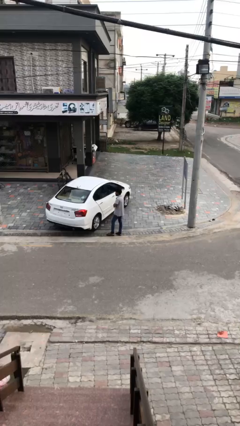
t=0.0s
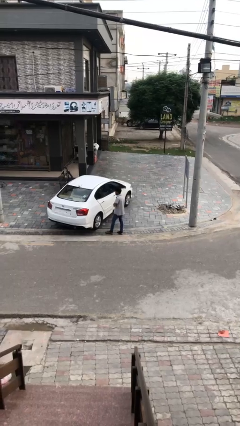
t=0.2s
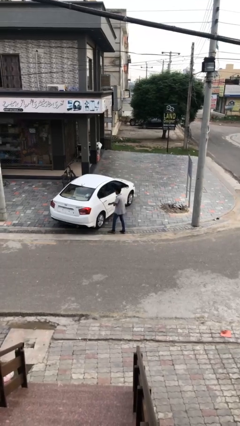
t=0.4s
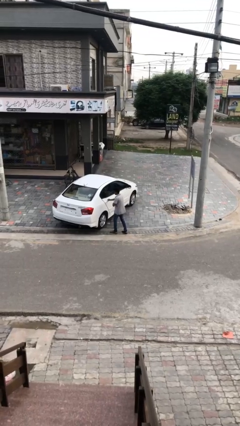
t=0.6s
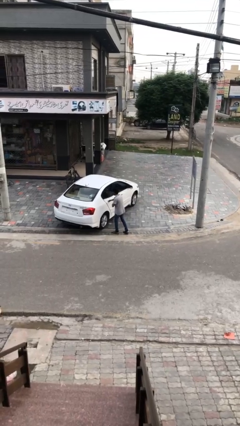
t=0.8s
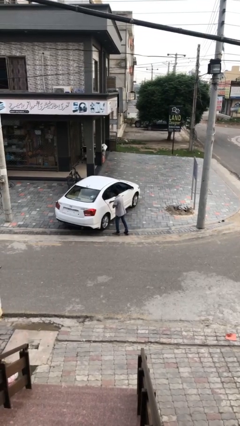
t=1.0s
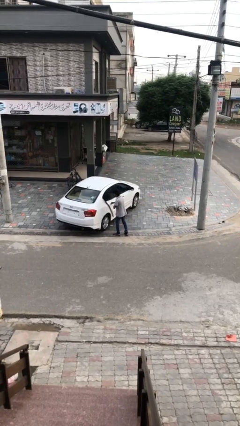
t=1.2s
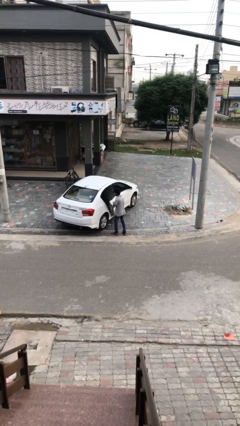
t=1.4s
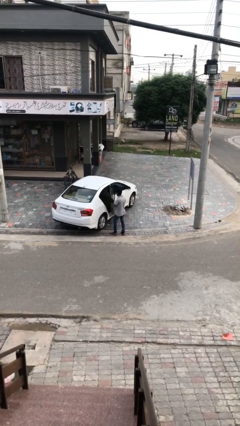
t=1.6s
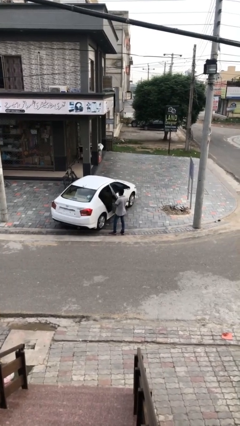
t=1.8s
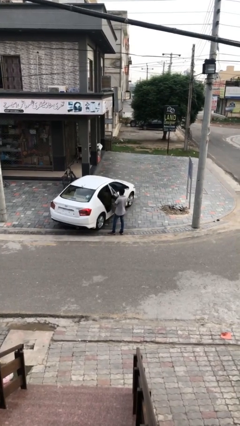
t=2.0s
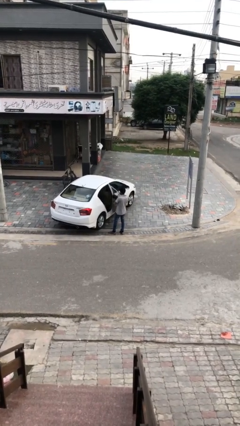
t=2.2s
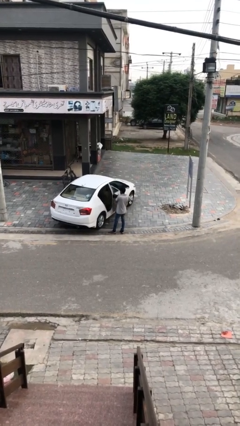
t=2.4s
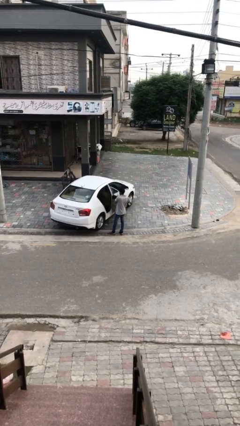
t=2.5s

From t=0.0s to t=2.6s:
person opens car door

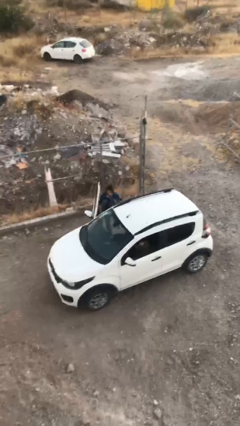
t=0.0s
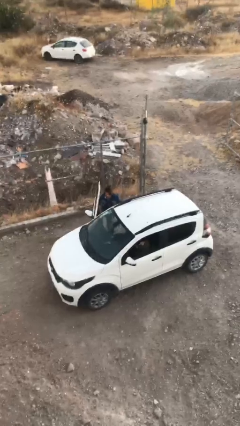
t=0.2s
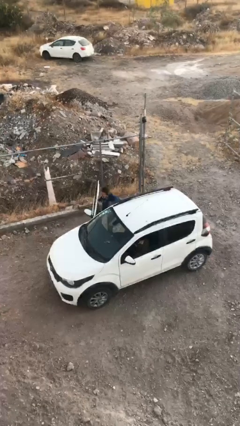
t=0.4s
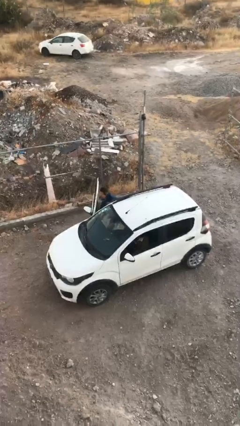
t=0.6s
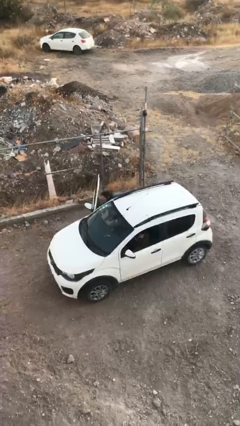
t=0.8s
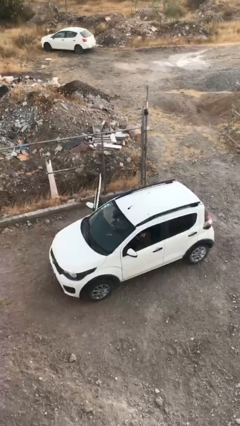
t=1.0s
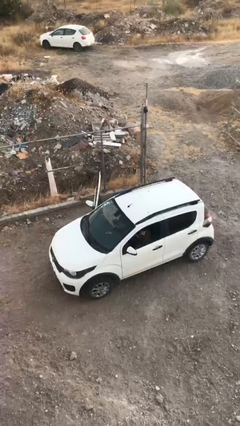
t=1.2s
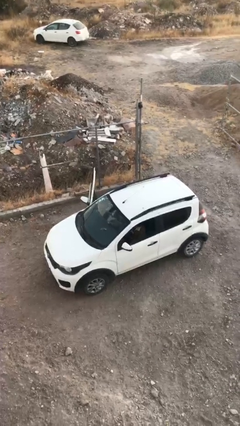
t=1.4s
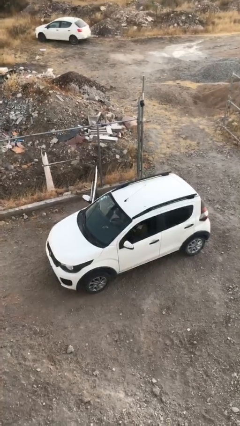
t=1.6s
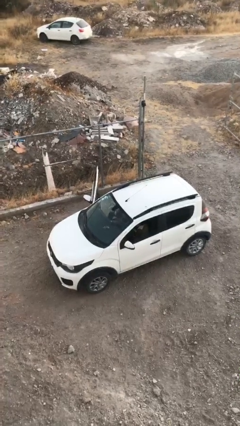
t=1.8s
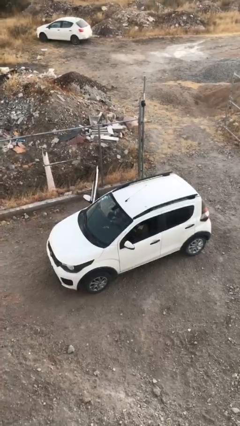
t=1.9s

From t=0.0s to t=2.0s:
person enters car

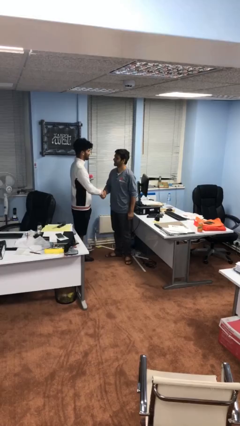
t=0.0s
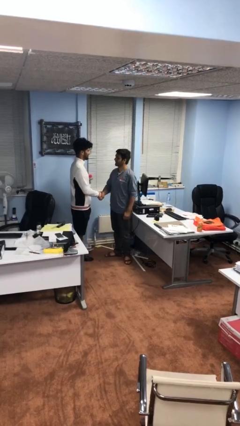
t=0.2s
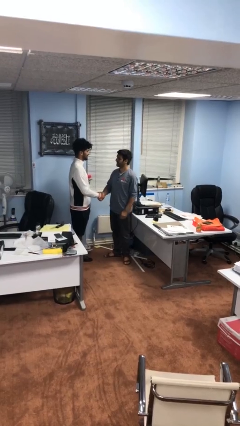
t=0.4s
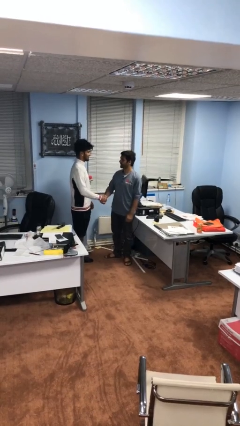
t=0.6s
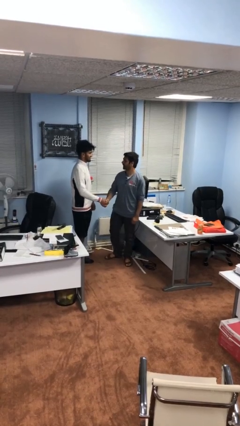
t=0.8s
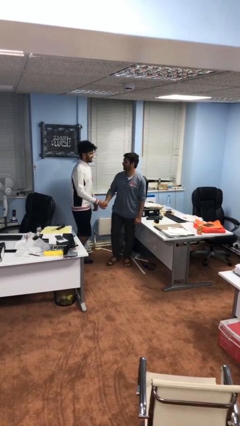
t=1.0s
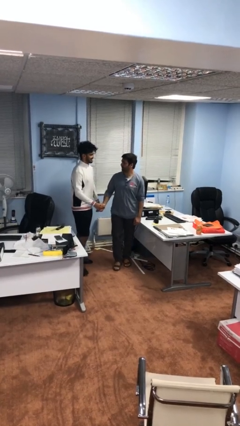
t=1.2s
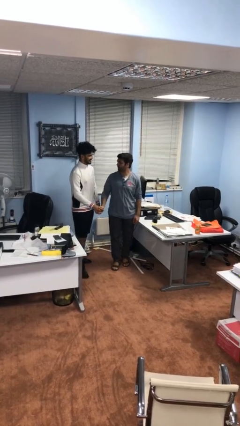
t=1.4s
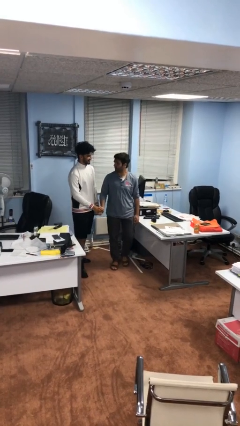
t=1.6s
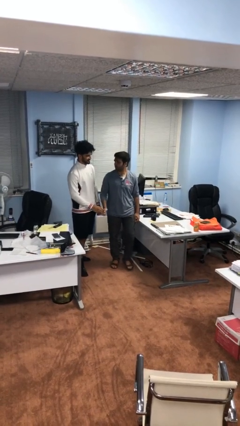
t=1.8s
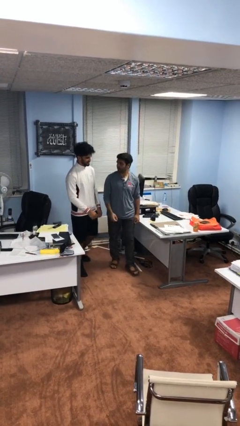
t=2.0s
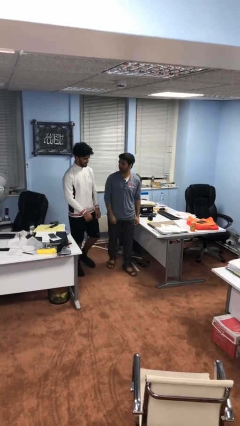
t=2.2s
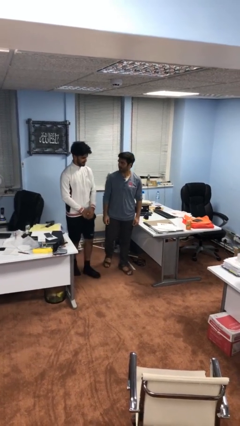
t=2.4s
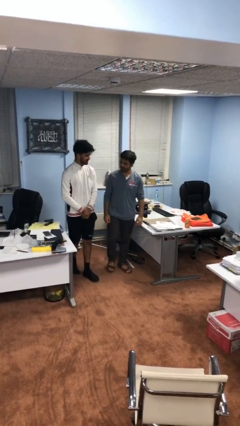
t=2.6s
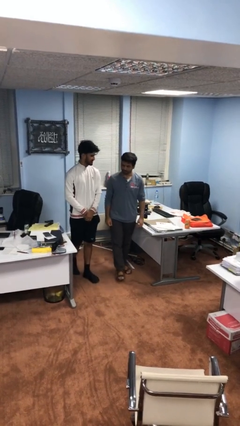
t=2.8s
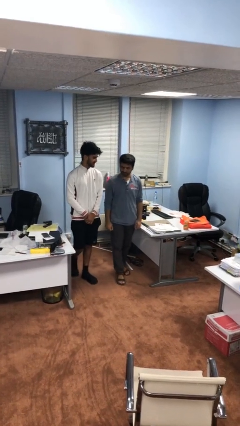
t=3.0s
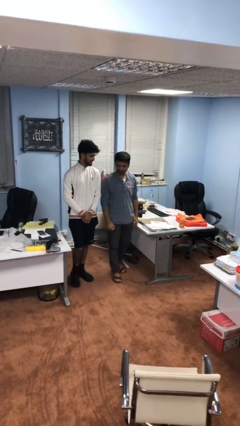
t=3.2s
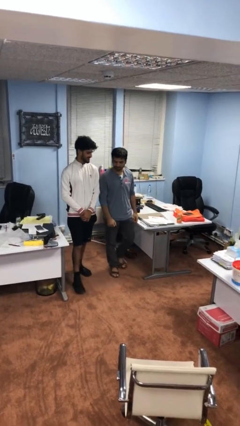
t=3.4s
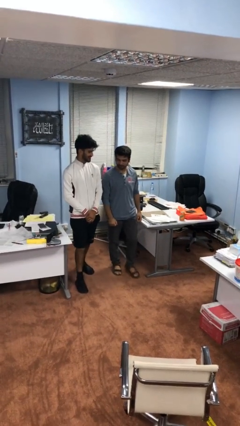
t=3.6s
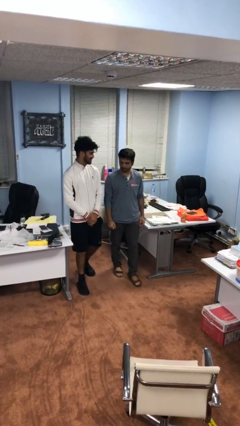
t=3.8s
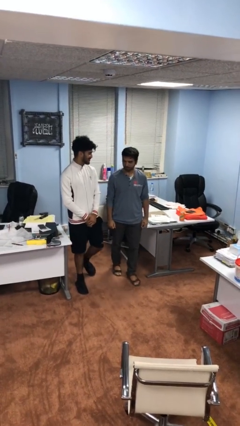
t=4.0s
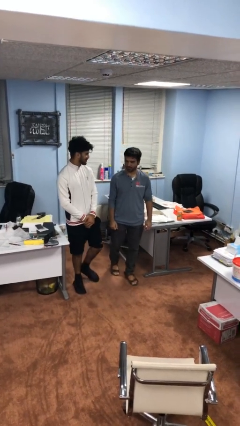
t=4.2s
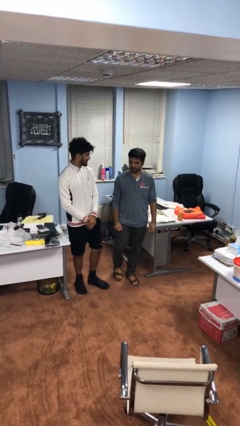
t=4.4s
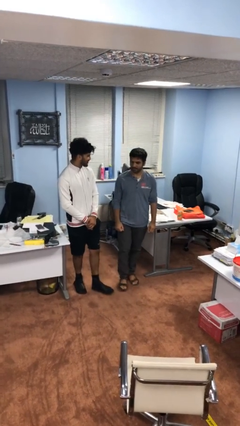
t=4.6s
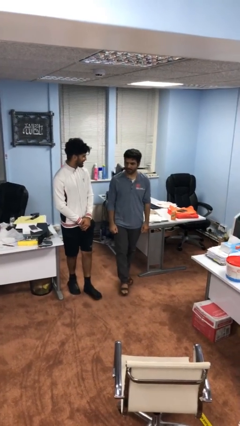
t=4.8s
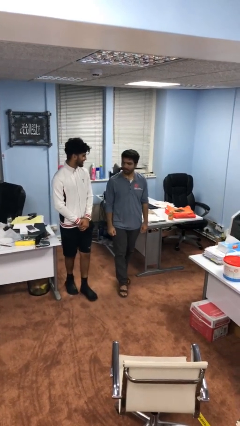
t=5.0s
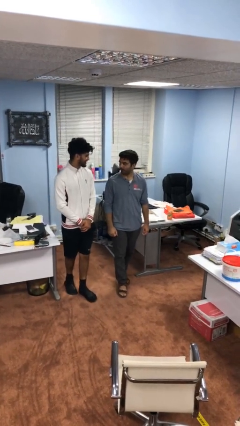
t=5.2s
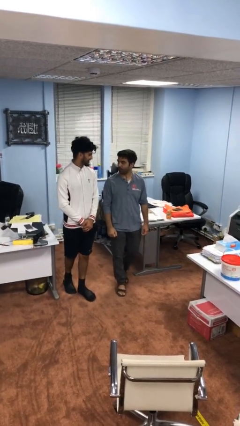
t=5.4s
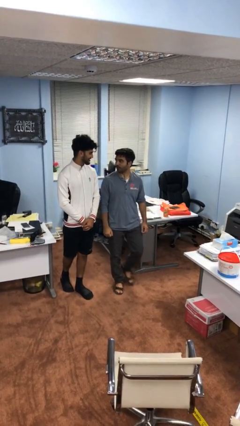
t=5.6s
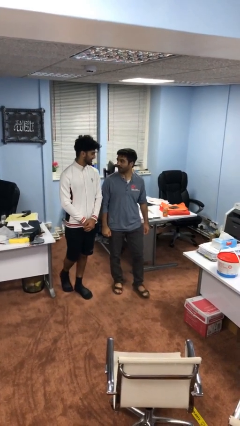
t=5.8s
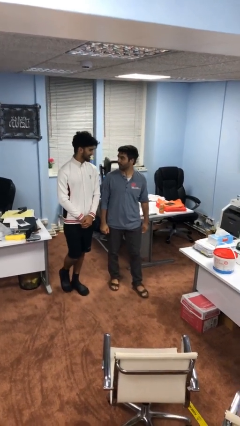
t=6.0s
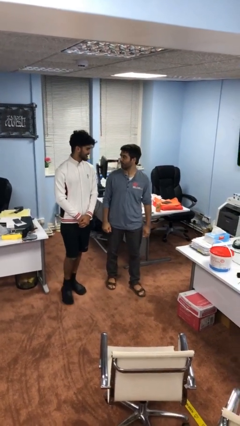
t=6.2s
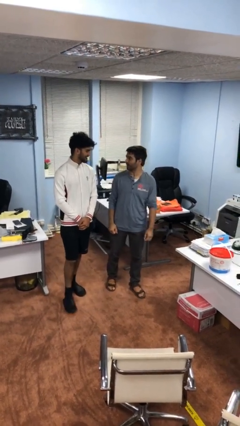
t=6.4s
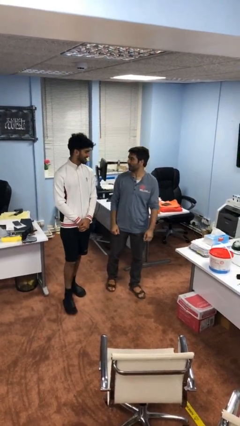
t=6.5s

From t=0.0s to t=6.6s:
person talks to person

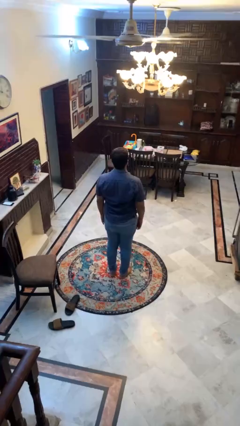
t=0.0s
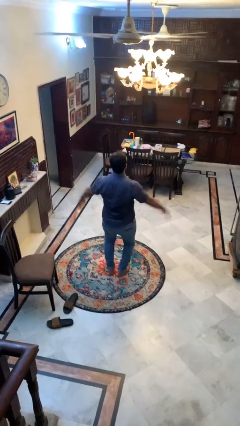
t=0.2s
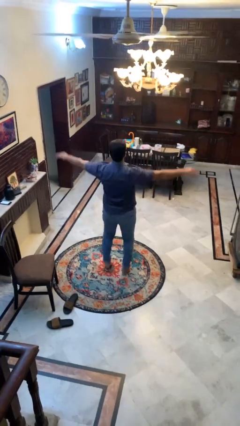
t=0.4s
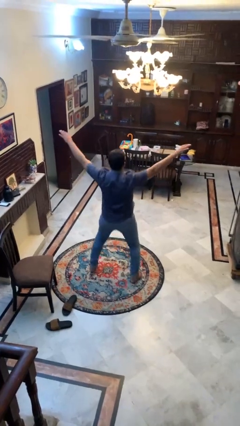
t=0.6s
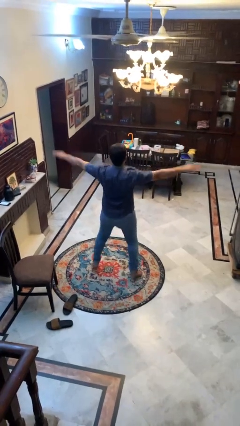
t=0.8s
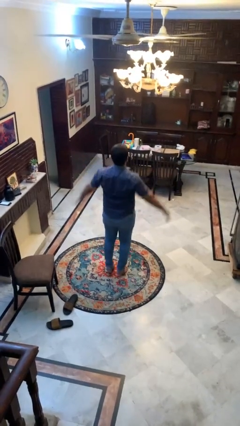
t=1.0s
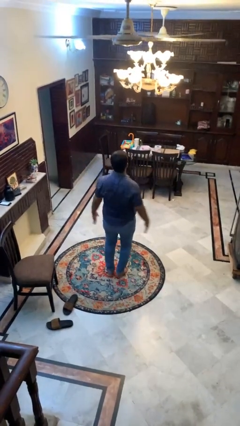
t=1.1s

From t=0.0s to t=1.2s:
person exercises with jumping jacks

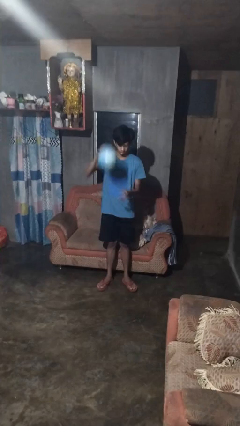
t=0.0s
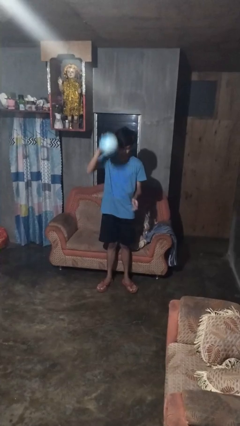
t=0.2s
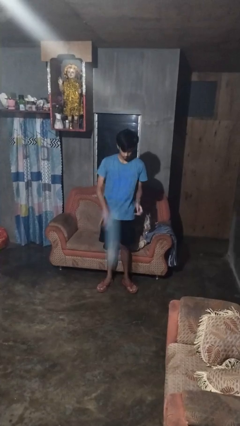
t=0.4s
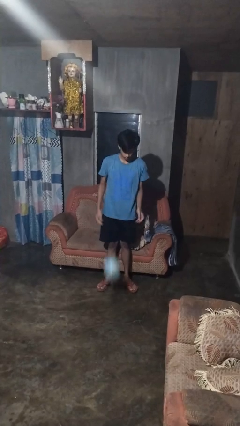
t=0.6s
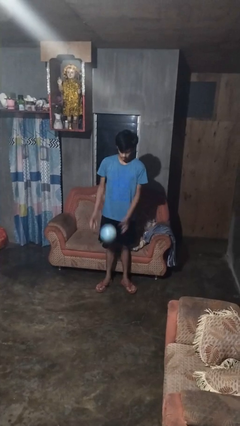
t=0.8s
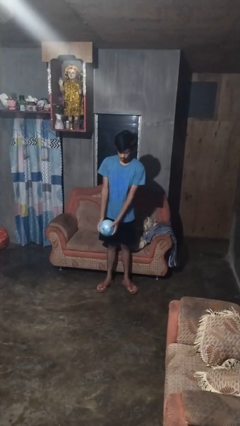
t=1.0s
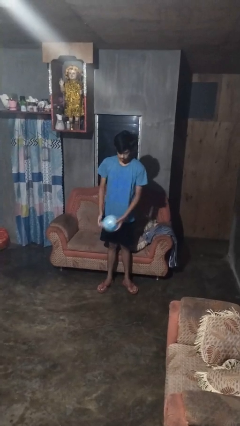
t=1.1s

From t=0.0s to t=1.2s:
person bounces ball on floor

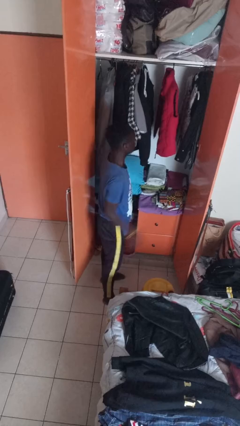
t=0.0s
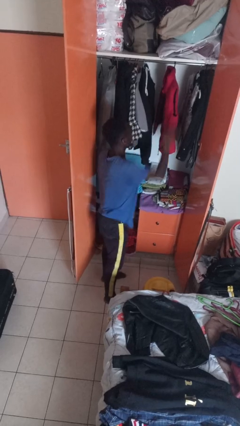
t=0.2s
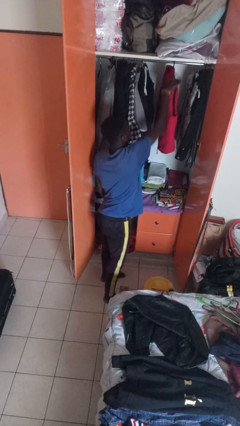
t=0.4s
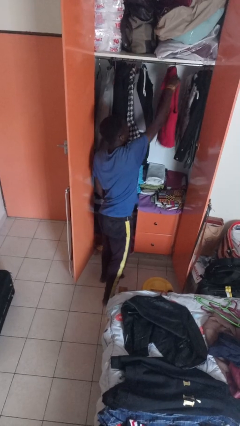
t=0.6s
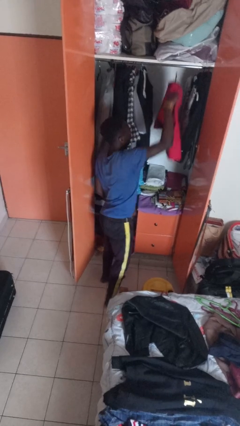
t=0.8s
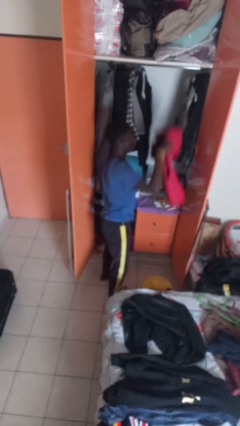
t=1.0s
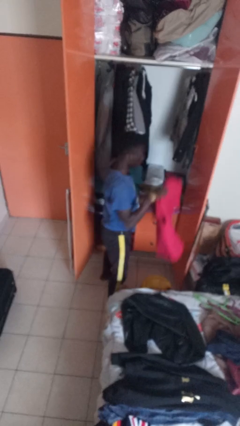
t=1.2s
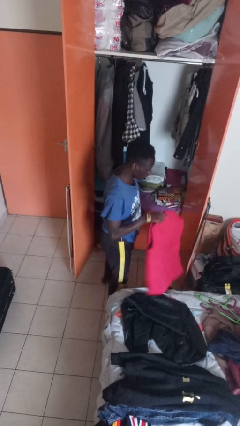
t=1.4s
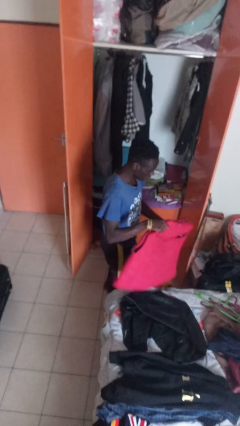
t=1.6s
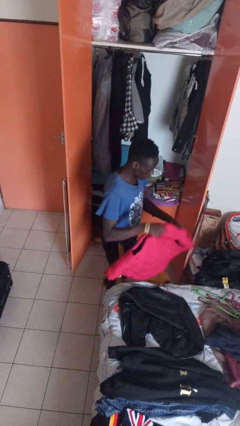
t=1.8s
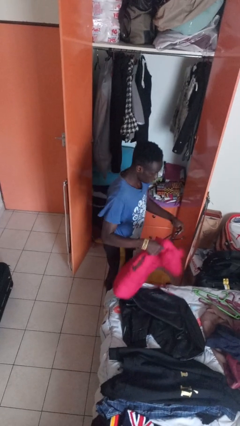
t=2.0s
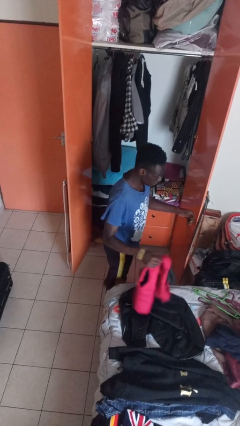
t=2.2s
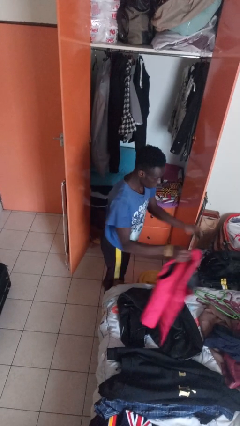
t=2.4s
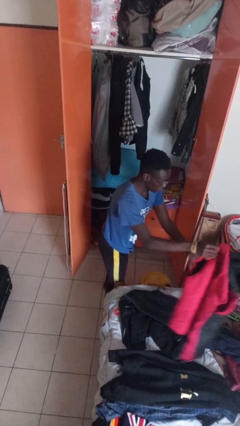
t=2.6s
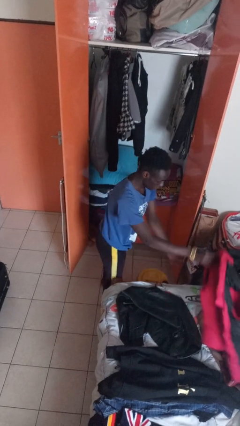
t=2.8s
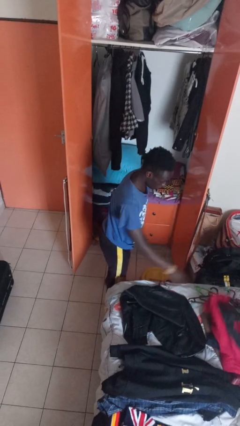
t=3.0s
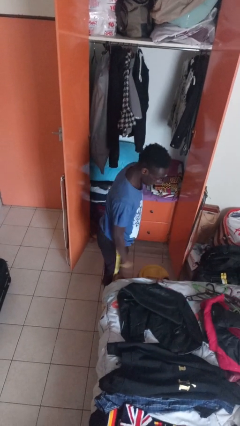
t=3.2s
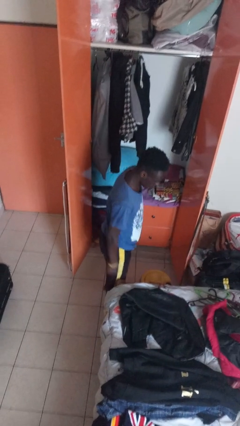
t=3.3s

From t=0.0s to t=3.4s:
person takes clothes from closet

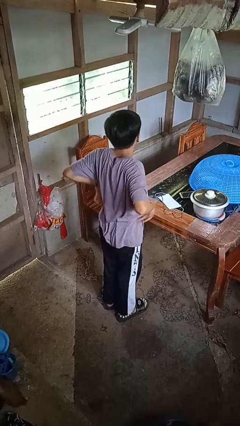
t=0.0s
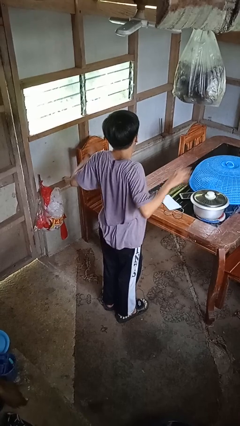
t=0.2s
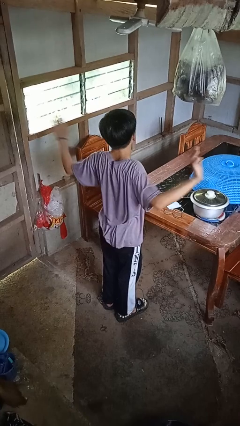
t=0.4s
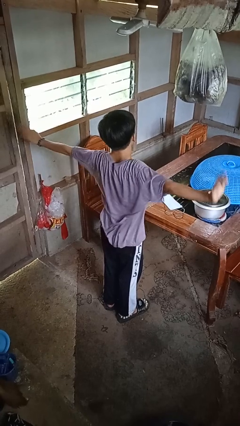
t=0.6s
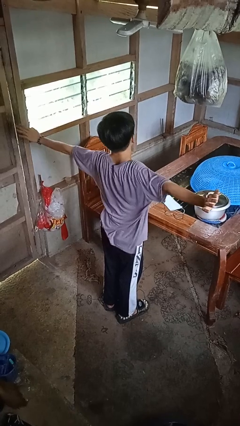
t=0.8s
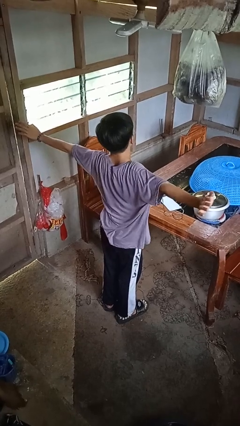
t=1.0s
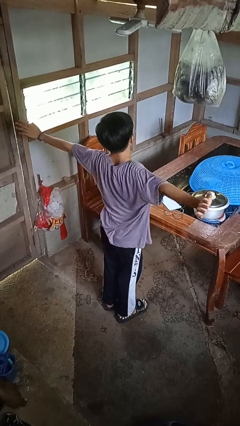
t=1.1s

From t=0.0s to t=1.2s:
person stretches arms to side
